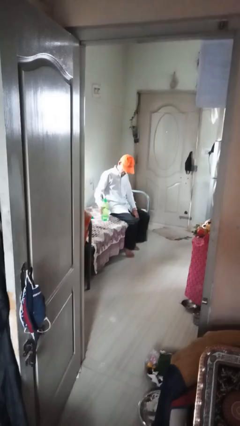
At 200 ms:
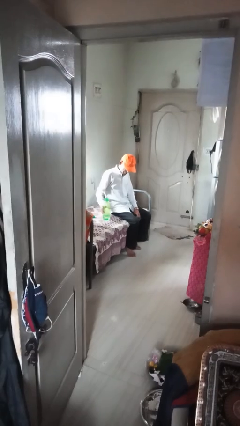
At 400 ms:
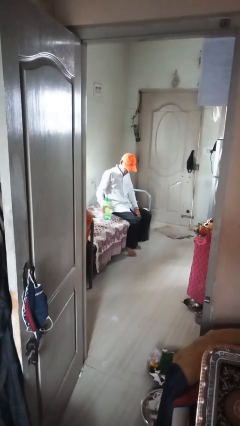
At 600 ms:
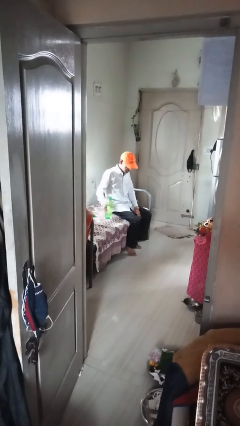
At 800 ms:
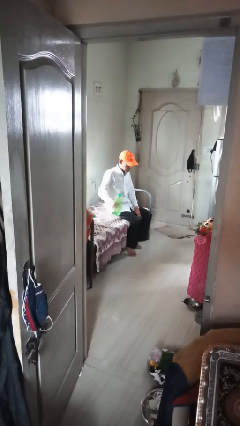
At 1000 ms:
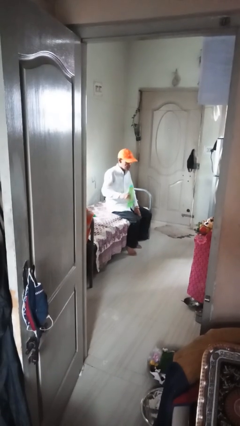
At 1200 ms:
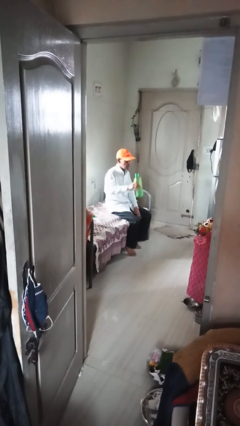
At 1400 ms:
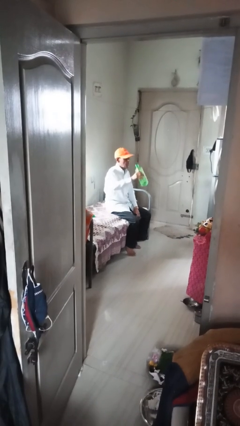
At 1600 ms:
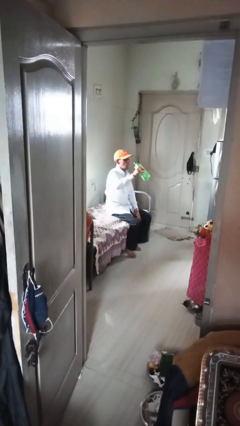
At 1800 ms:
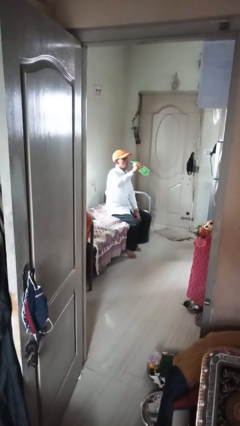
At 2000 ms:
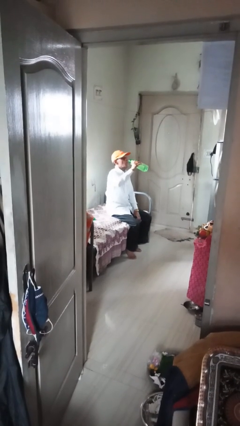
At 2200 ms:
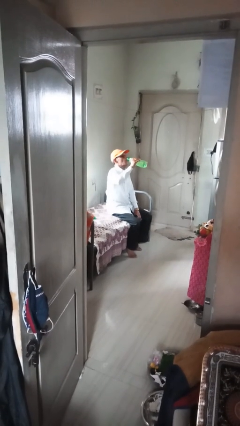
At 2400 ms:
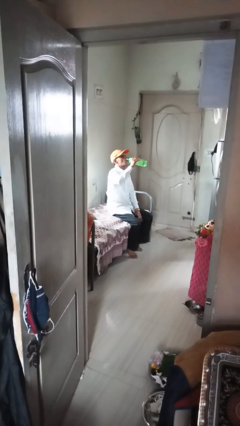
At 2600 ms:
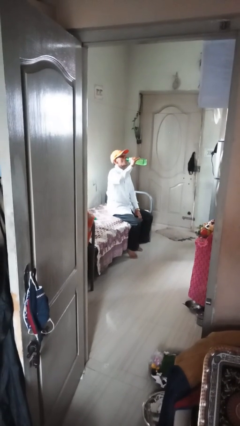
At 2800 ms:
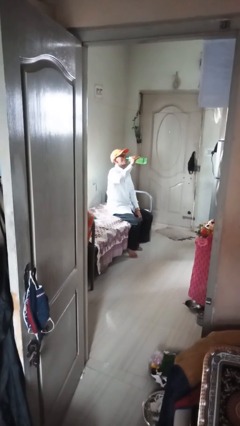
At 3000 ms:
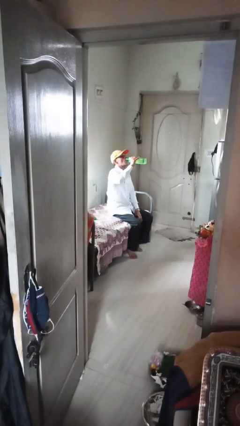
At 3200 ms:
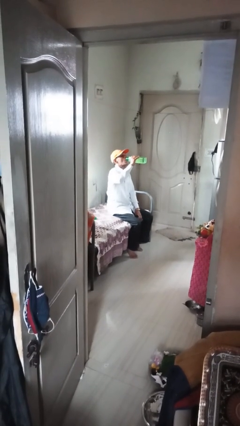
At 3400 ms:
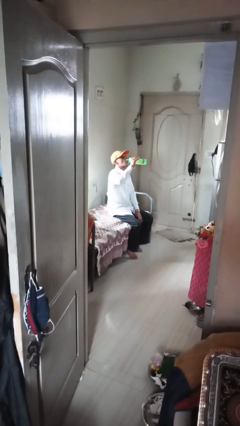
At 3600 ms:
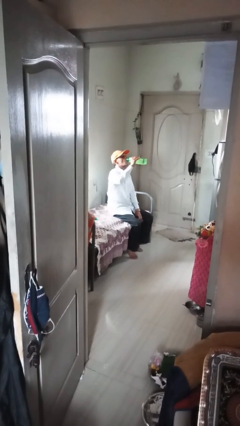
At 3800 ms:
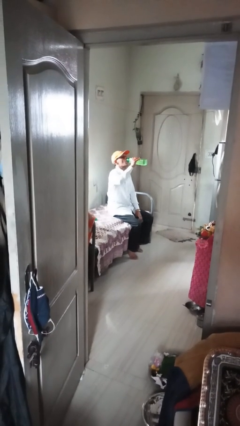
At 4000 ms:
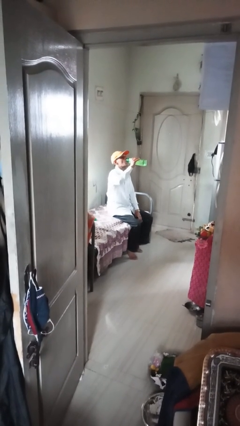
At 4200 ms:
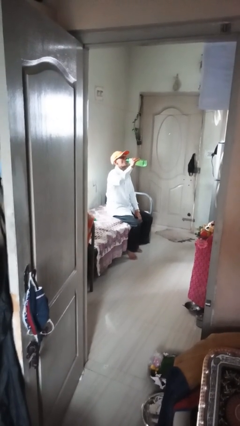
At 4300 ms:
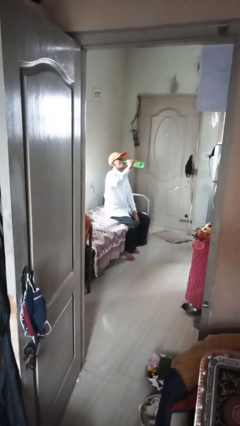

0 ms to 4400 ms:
person drinks from bottle

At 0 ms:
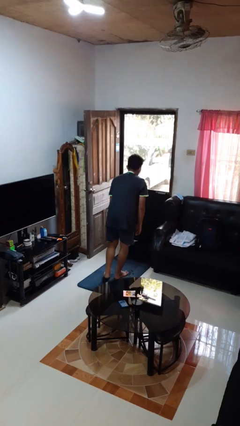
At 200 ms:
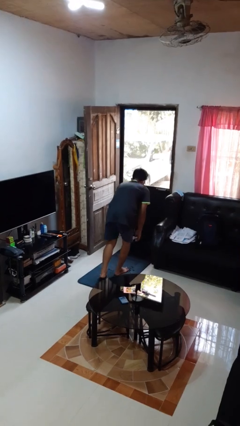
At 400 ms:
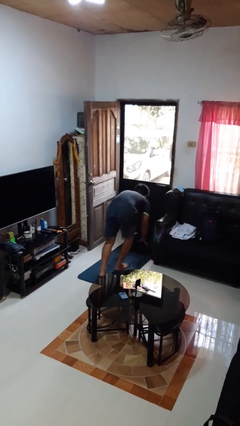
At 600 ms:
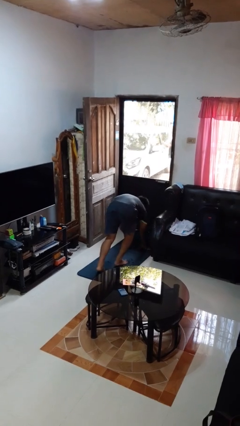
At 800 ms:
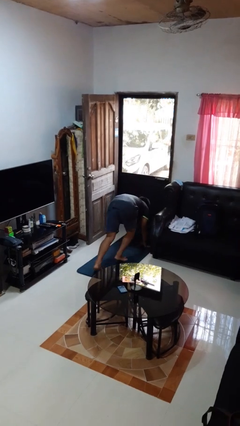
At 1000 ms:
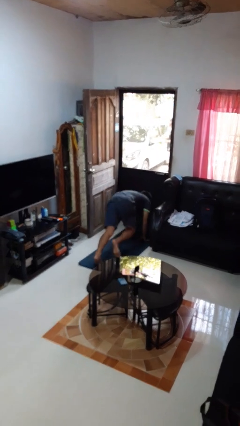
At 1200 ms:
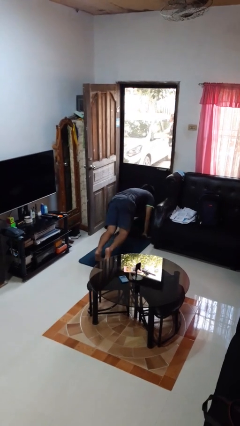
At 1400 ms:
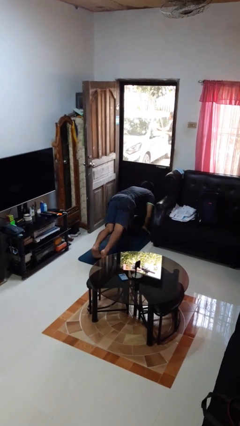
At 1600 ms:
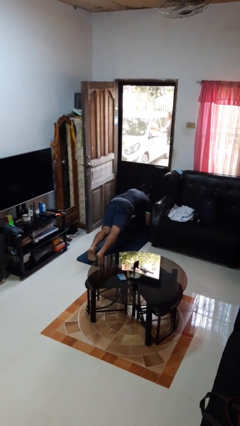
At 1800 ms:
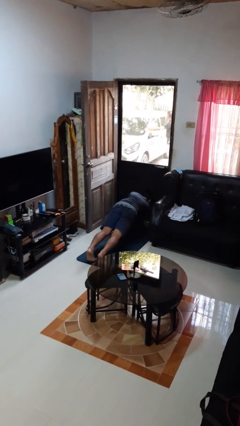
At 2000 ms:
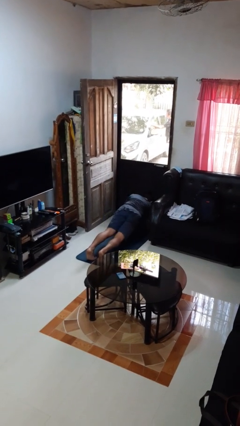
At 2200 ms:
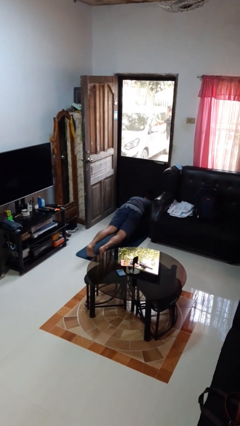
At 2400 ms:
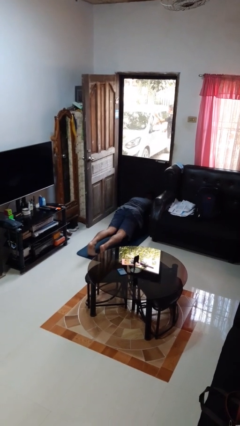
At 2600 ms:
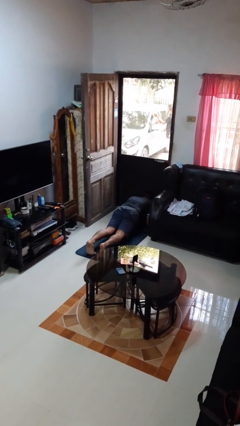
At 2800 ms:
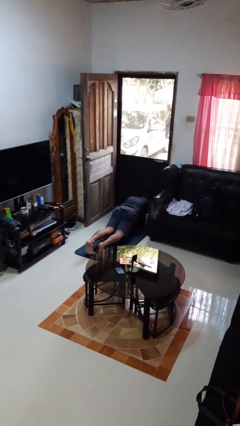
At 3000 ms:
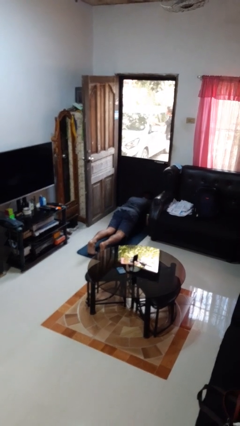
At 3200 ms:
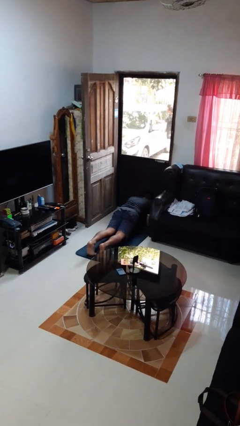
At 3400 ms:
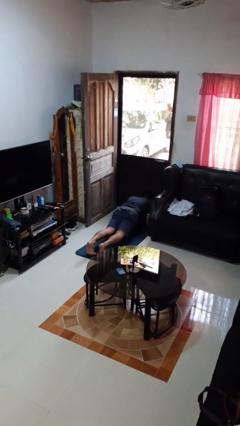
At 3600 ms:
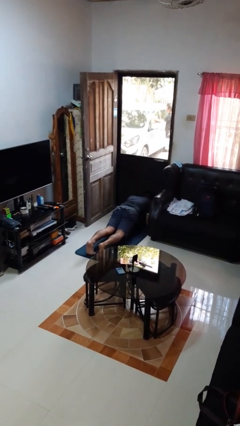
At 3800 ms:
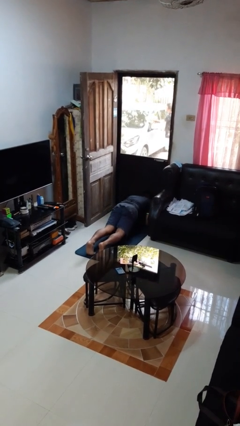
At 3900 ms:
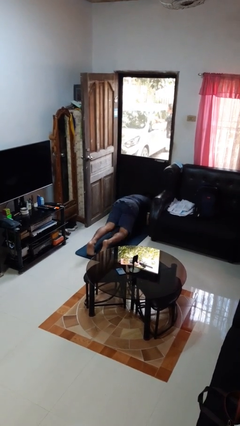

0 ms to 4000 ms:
person exercises with plank

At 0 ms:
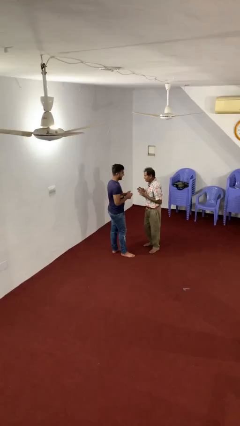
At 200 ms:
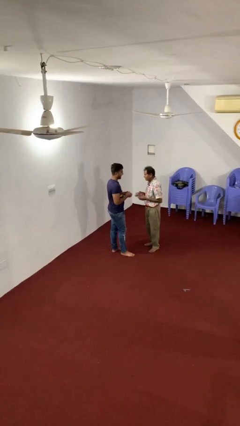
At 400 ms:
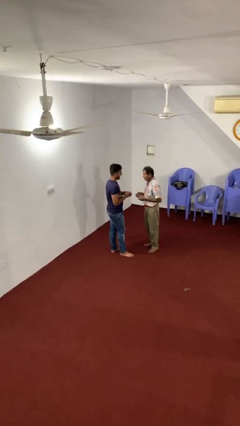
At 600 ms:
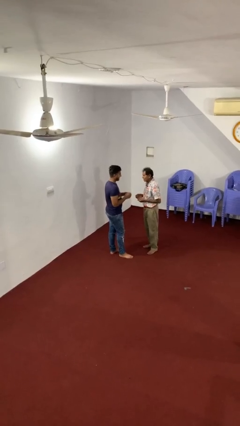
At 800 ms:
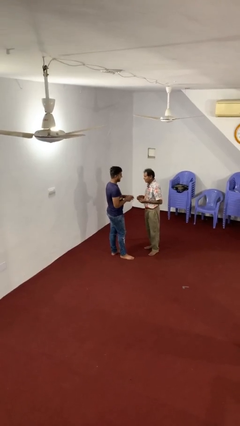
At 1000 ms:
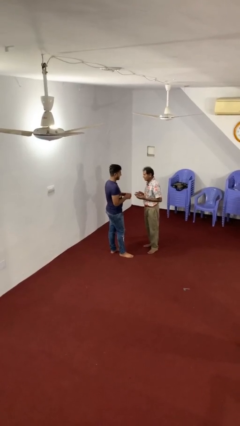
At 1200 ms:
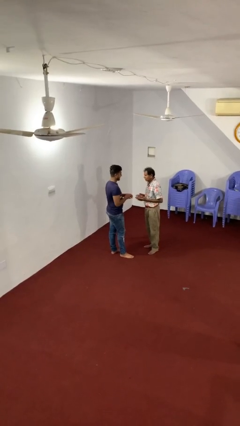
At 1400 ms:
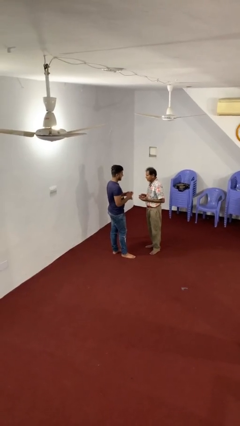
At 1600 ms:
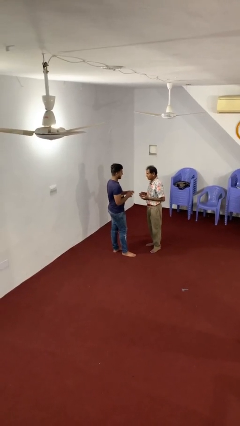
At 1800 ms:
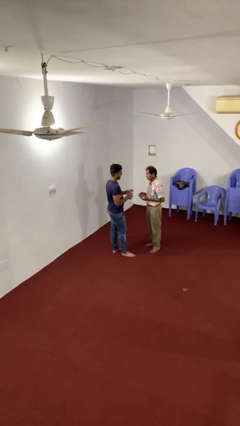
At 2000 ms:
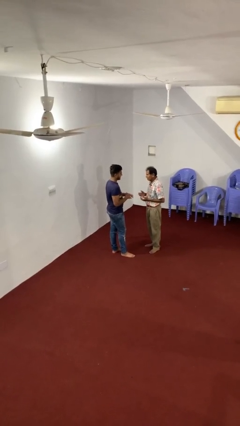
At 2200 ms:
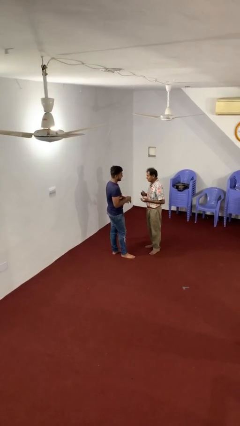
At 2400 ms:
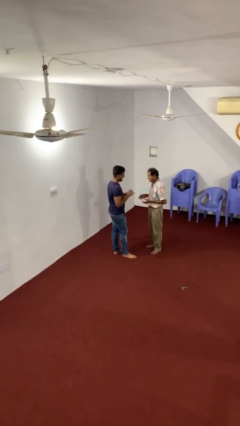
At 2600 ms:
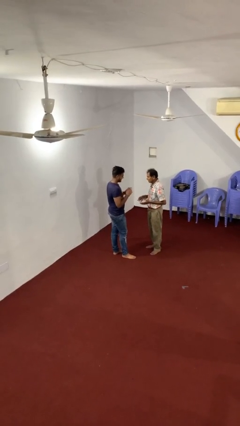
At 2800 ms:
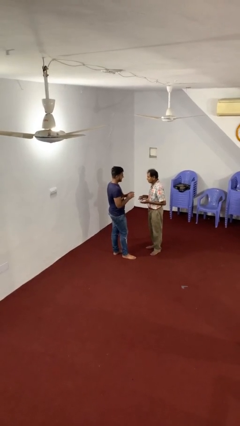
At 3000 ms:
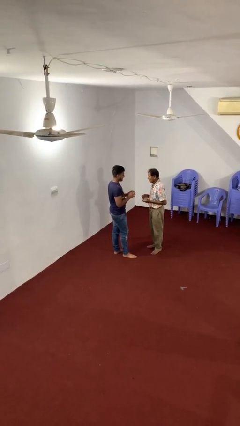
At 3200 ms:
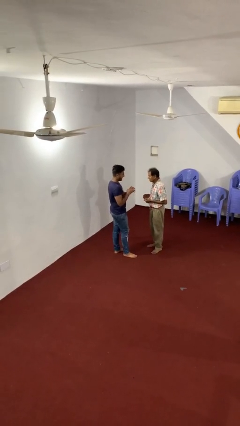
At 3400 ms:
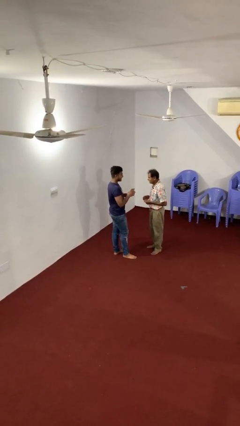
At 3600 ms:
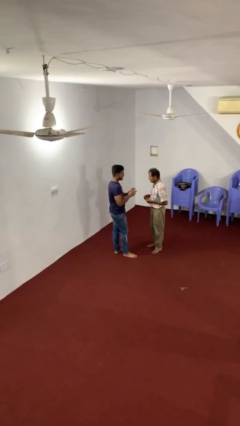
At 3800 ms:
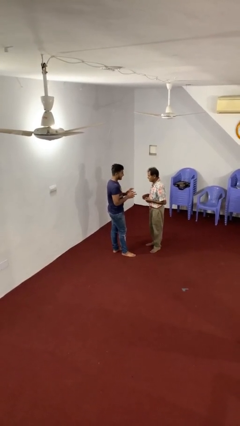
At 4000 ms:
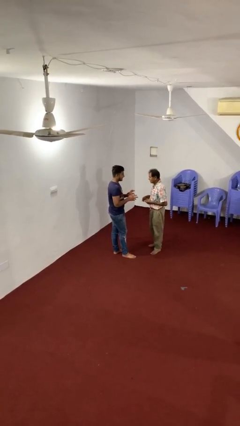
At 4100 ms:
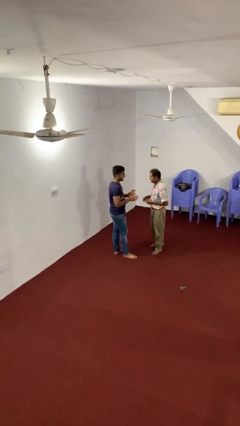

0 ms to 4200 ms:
person talks to person

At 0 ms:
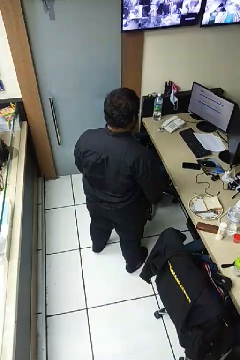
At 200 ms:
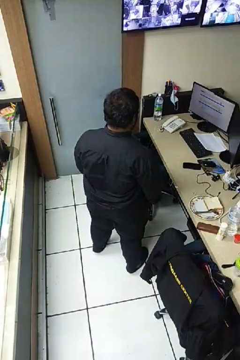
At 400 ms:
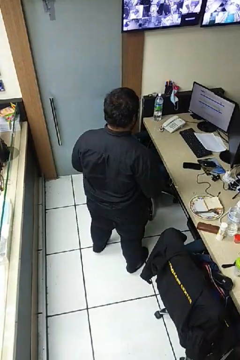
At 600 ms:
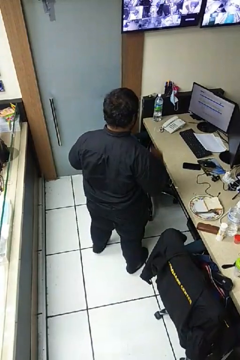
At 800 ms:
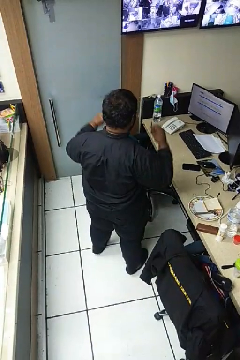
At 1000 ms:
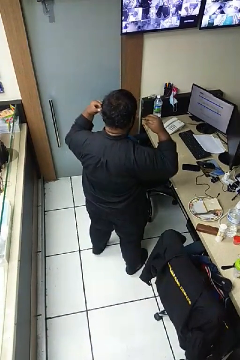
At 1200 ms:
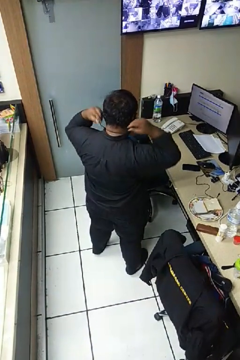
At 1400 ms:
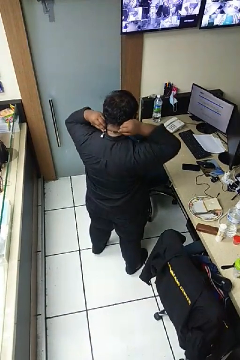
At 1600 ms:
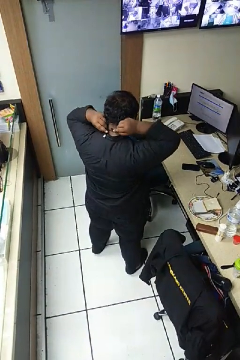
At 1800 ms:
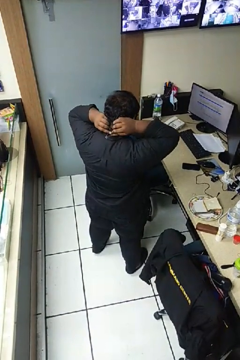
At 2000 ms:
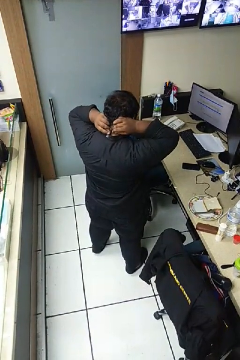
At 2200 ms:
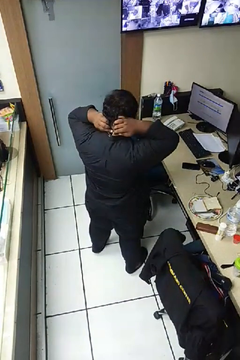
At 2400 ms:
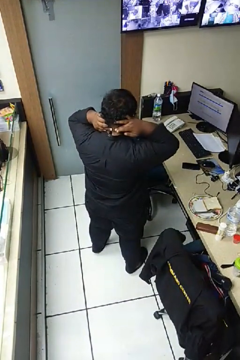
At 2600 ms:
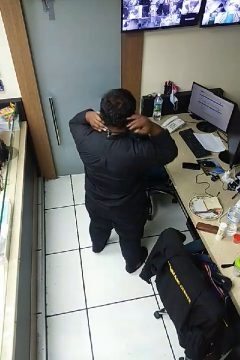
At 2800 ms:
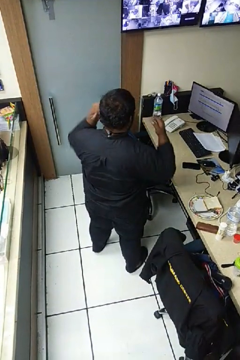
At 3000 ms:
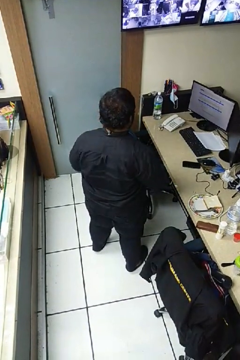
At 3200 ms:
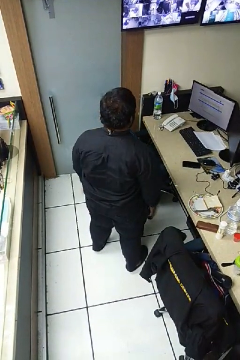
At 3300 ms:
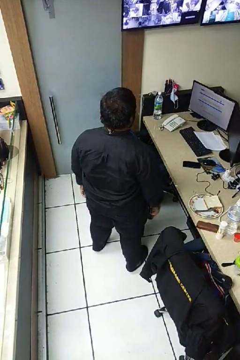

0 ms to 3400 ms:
person puts on necklace

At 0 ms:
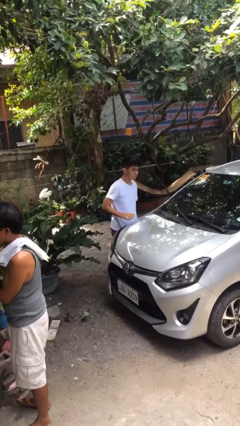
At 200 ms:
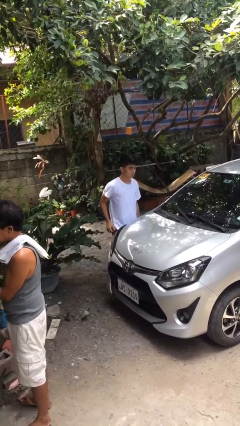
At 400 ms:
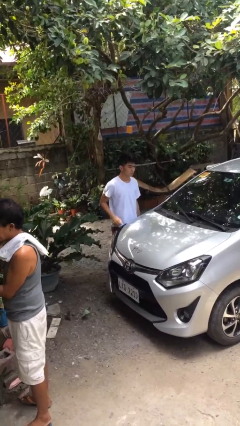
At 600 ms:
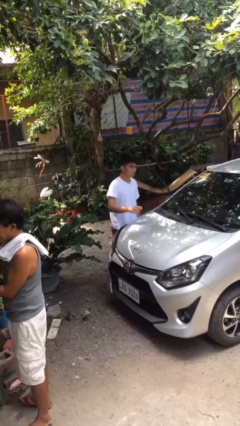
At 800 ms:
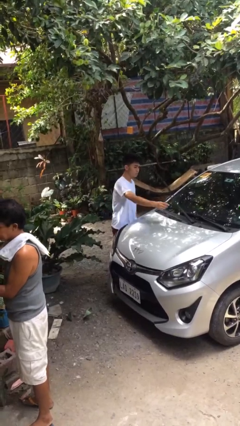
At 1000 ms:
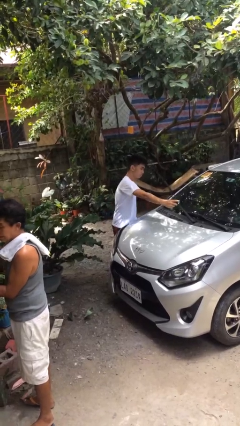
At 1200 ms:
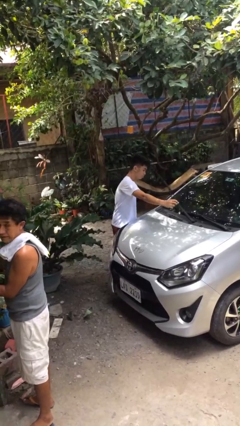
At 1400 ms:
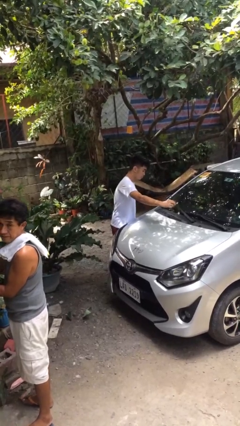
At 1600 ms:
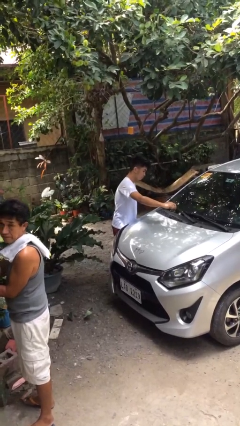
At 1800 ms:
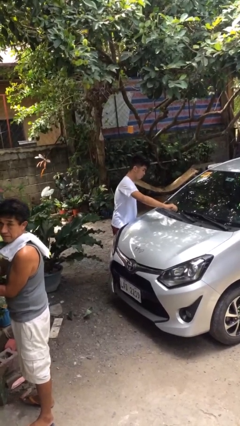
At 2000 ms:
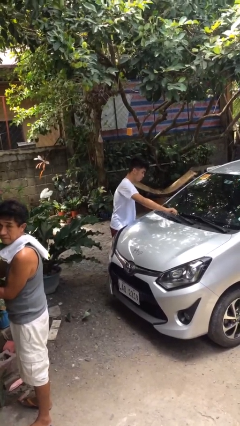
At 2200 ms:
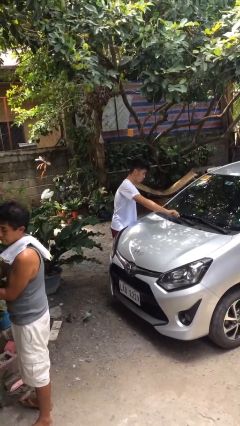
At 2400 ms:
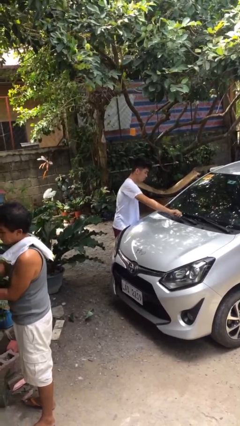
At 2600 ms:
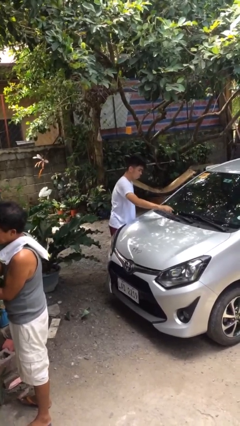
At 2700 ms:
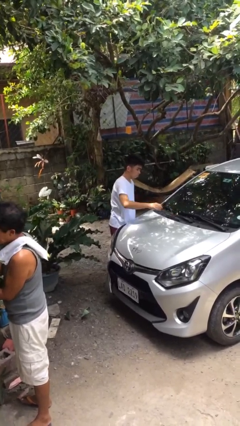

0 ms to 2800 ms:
person flips down car wipers
